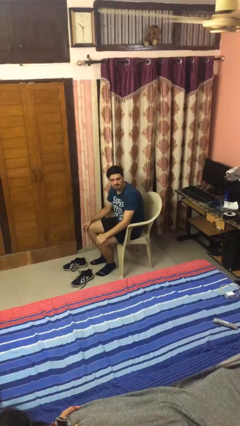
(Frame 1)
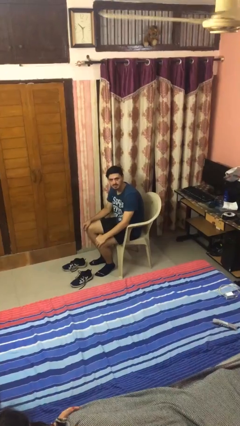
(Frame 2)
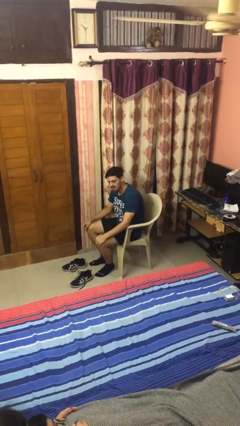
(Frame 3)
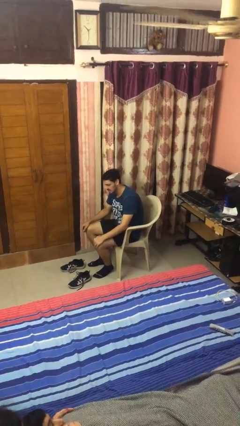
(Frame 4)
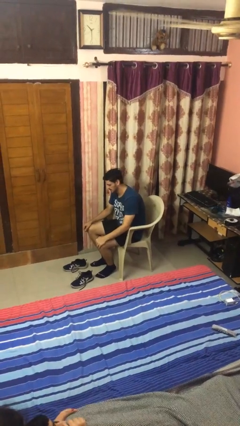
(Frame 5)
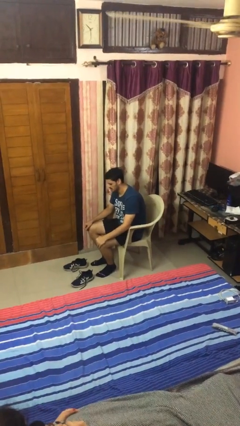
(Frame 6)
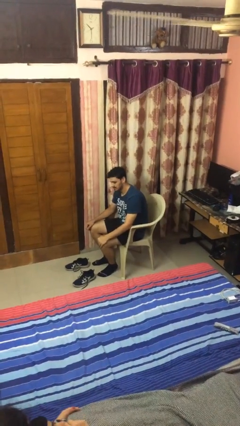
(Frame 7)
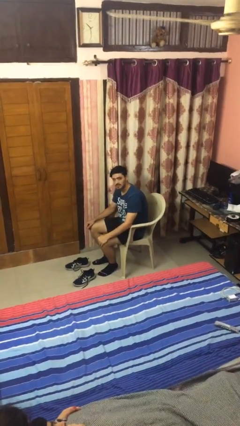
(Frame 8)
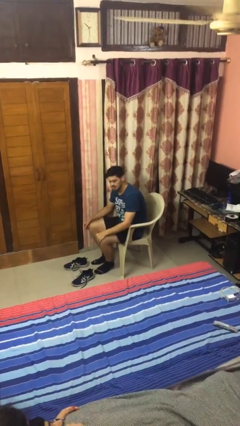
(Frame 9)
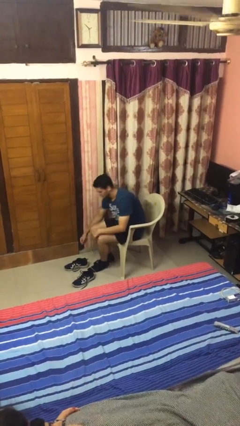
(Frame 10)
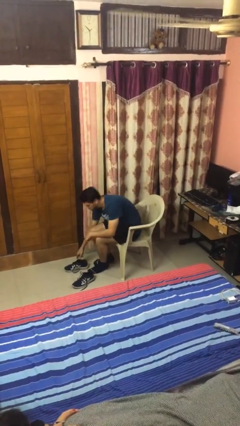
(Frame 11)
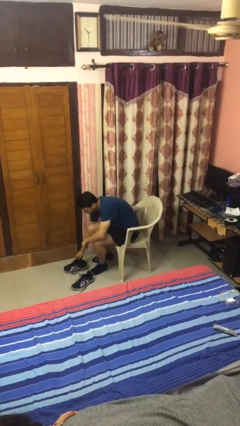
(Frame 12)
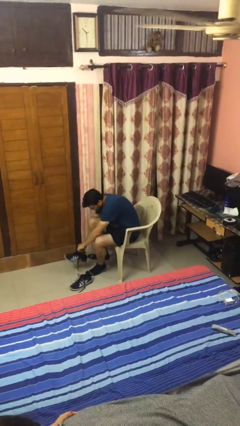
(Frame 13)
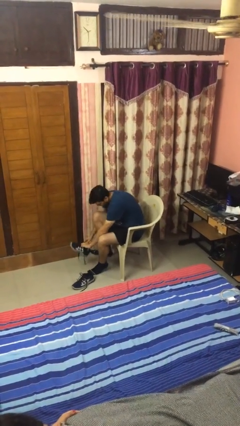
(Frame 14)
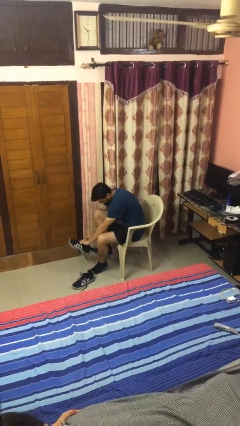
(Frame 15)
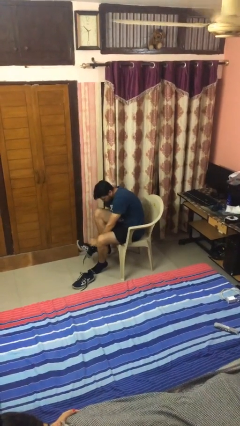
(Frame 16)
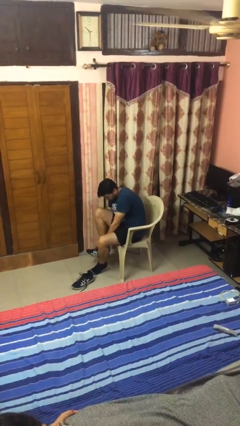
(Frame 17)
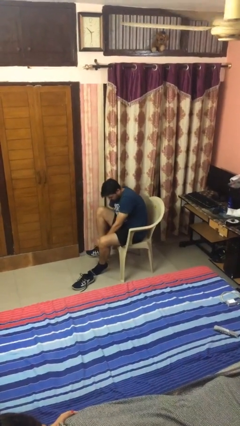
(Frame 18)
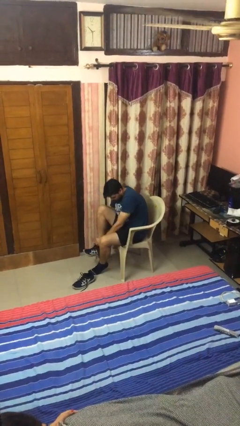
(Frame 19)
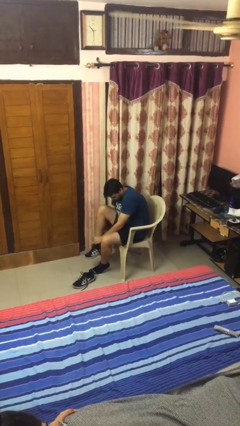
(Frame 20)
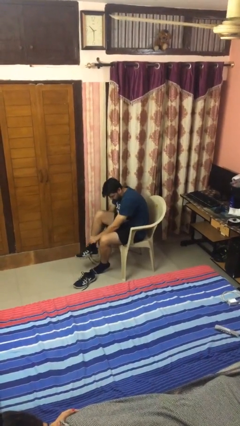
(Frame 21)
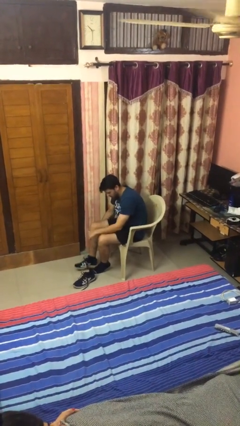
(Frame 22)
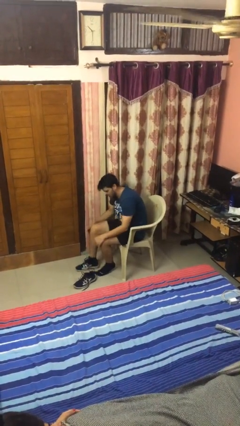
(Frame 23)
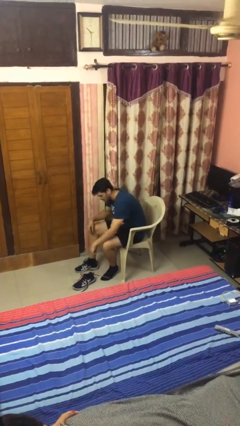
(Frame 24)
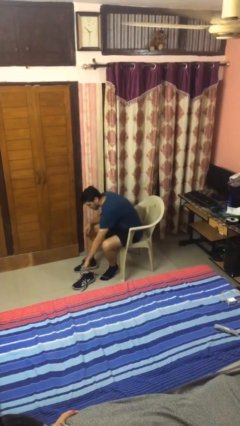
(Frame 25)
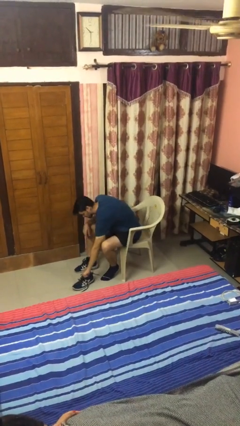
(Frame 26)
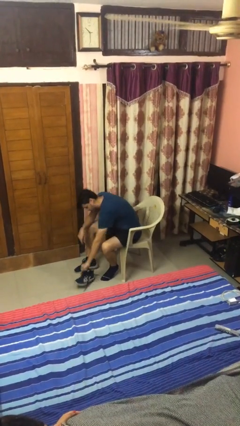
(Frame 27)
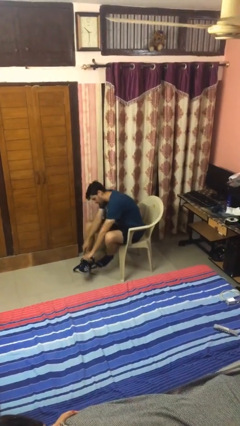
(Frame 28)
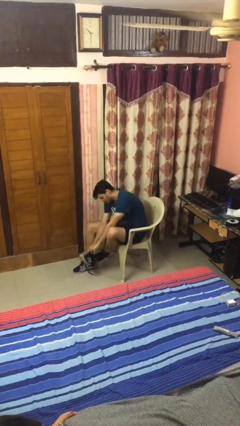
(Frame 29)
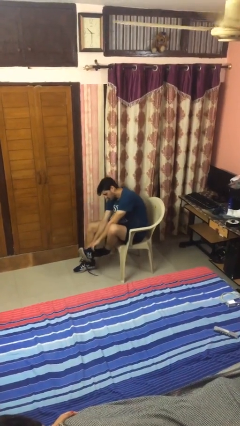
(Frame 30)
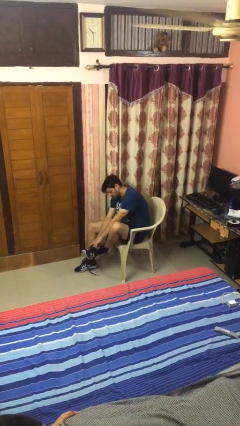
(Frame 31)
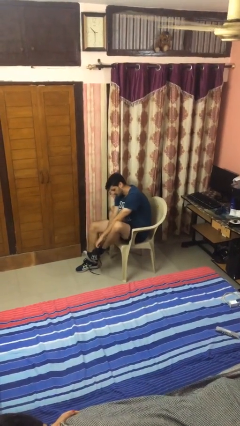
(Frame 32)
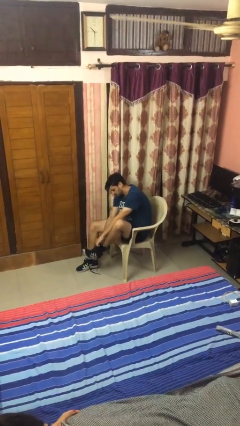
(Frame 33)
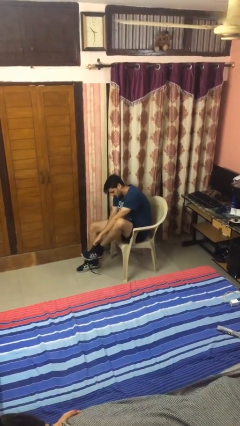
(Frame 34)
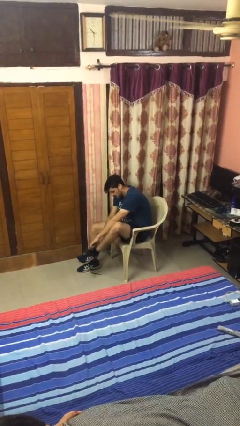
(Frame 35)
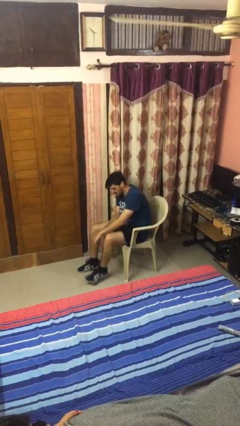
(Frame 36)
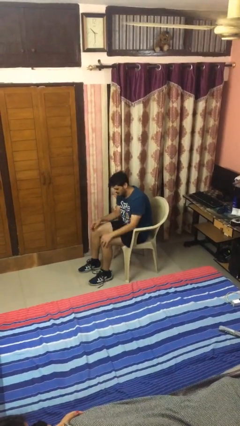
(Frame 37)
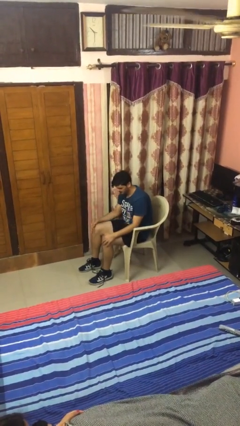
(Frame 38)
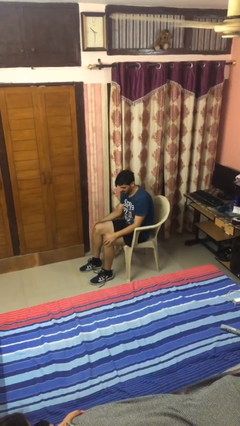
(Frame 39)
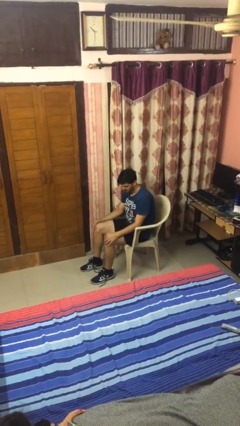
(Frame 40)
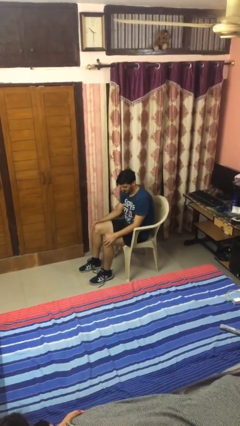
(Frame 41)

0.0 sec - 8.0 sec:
person puts on boots

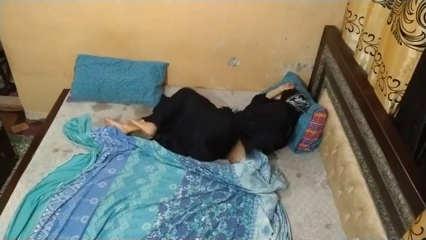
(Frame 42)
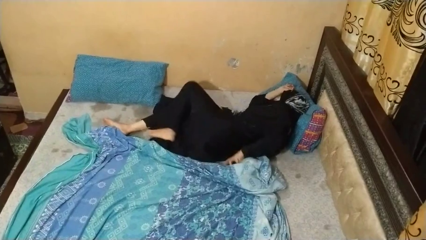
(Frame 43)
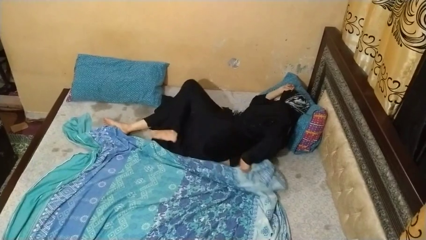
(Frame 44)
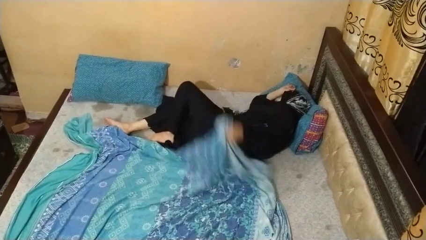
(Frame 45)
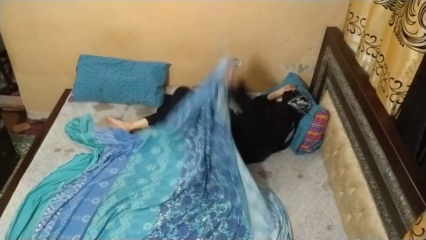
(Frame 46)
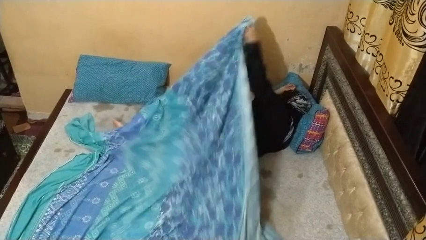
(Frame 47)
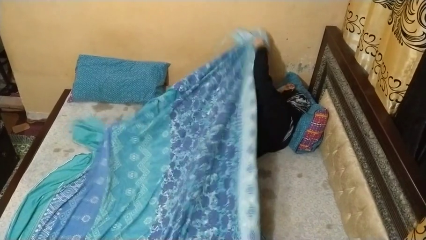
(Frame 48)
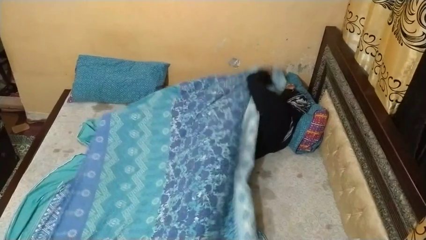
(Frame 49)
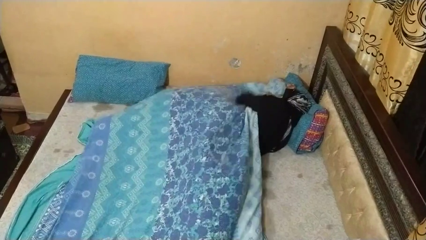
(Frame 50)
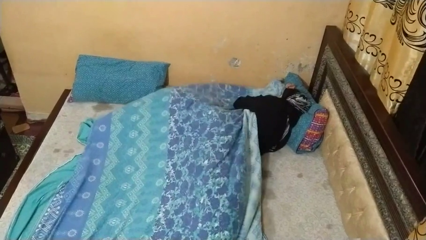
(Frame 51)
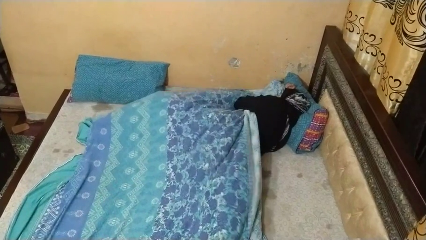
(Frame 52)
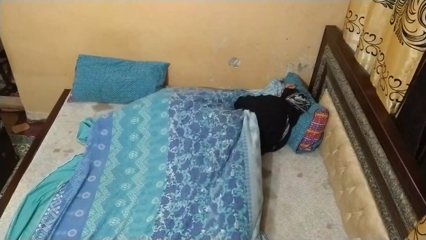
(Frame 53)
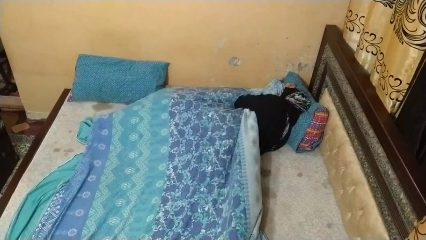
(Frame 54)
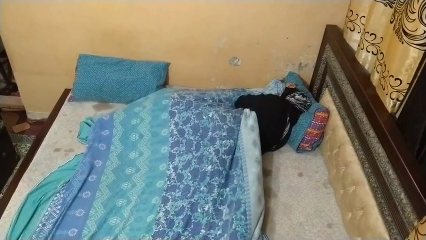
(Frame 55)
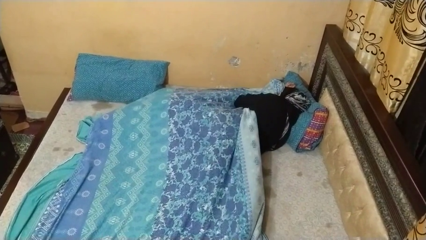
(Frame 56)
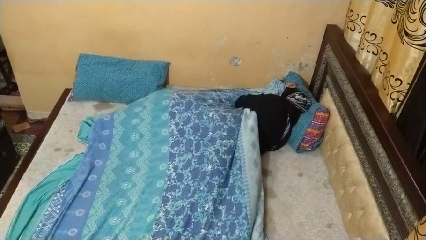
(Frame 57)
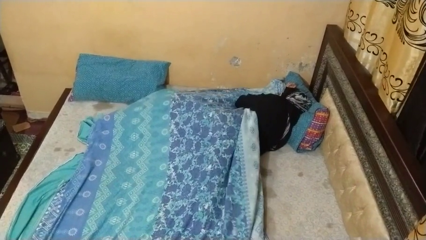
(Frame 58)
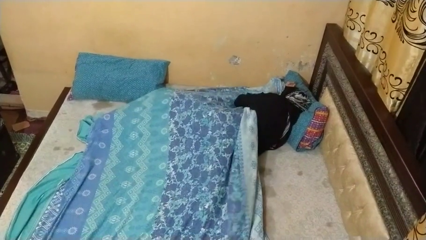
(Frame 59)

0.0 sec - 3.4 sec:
person covers with bedsheets

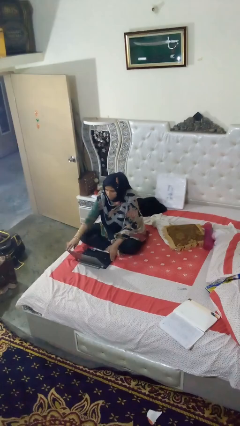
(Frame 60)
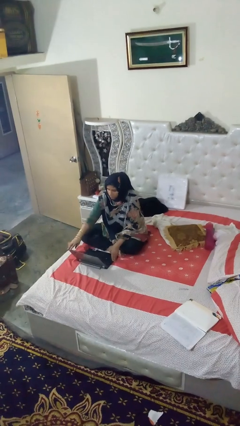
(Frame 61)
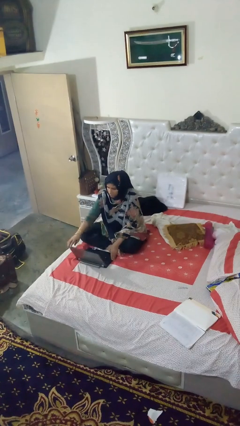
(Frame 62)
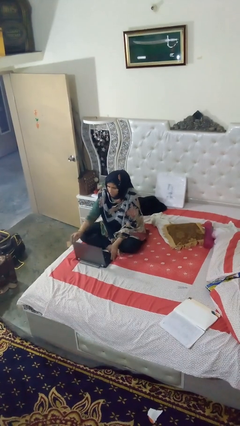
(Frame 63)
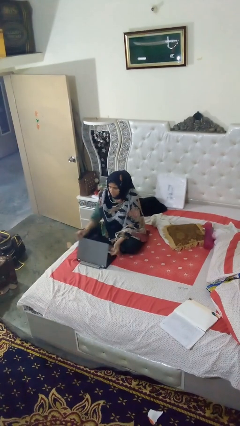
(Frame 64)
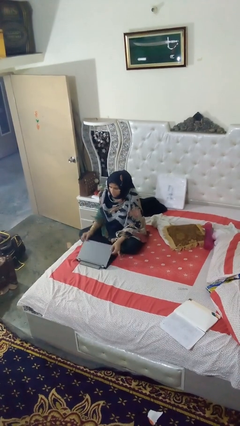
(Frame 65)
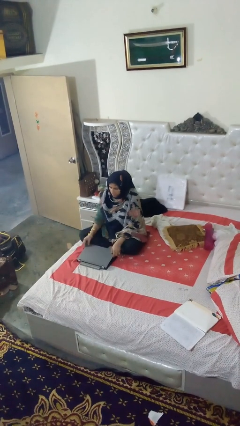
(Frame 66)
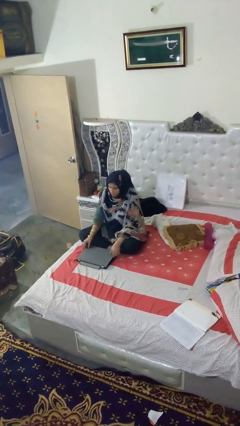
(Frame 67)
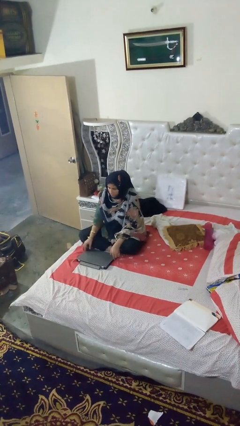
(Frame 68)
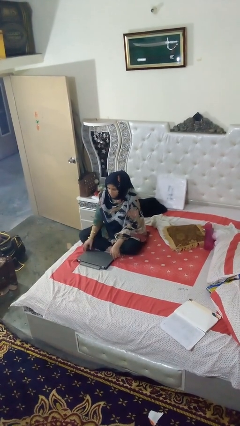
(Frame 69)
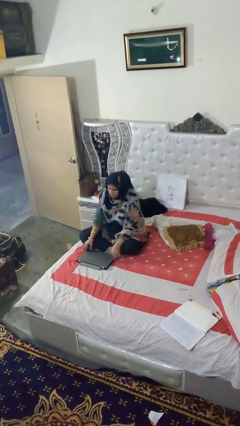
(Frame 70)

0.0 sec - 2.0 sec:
person closes laptop

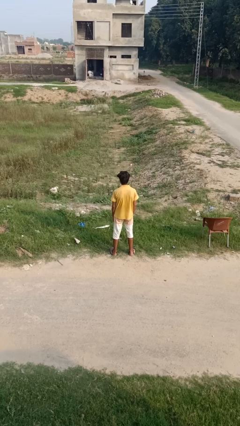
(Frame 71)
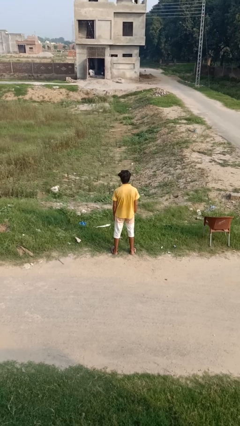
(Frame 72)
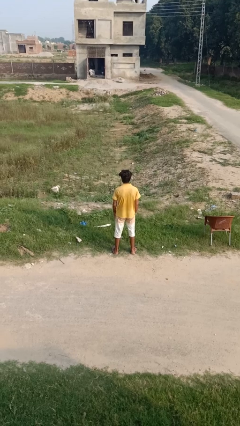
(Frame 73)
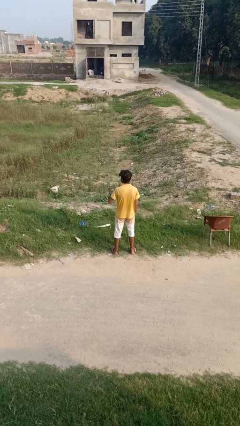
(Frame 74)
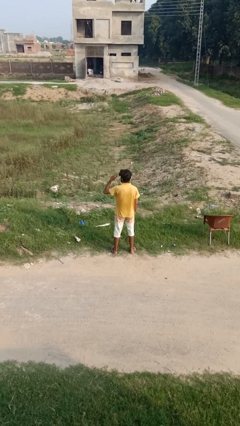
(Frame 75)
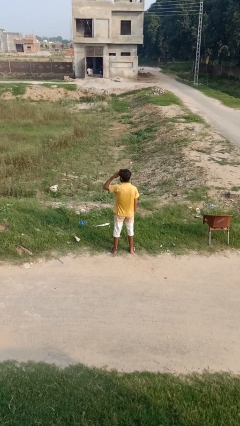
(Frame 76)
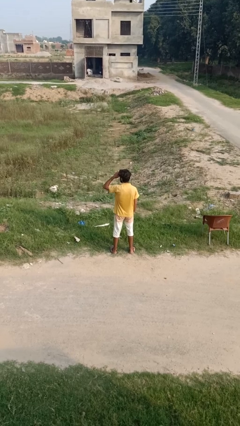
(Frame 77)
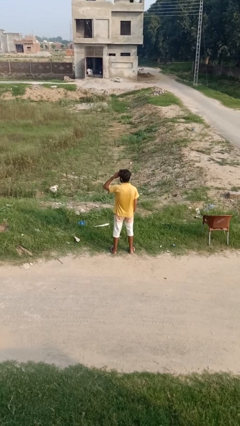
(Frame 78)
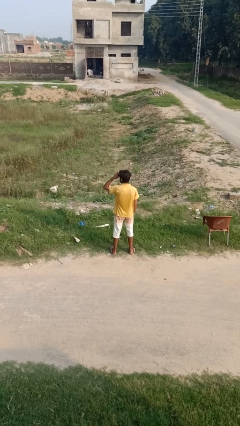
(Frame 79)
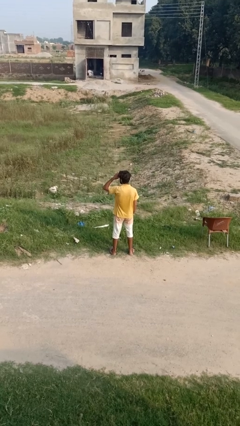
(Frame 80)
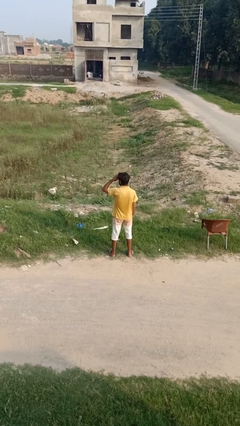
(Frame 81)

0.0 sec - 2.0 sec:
person shades eyes

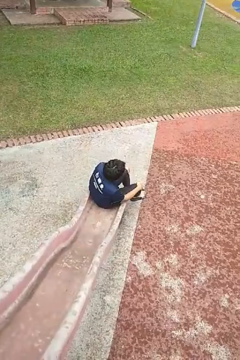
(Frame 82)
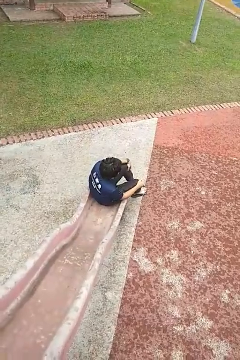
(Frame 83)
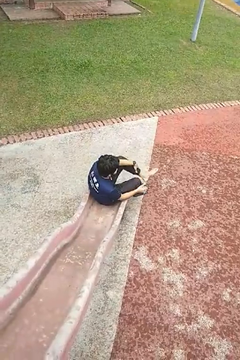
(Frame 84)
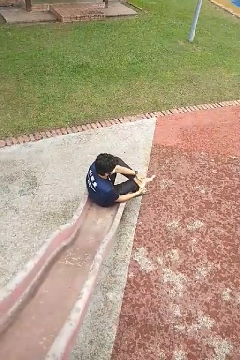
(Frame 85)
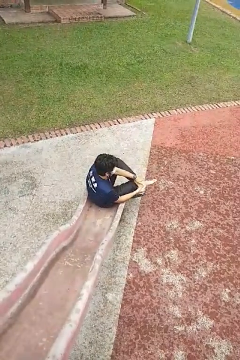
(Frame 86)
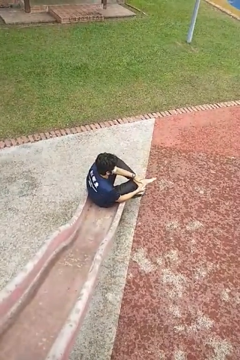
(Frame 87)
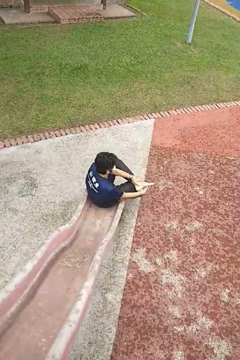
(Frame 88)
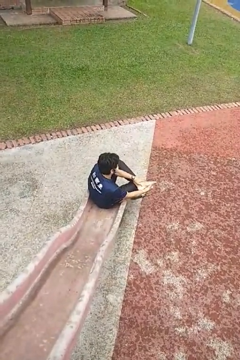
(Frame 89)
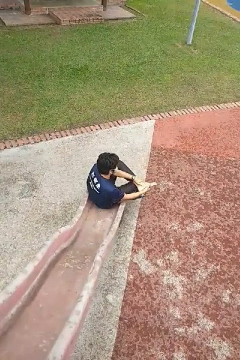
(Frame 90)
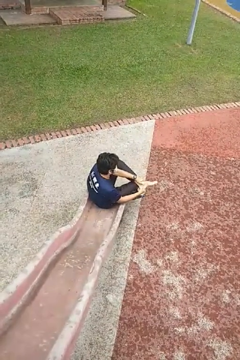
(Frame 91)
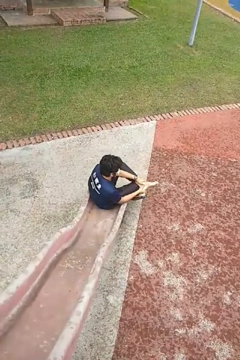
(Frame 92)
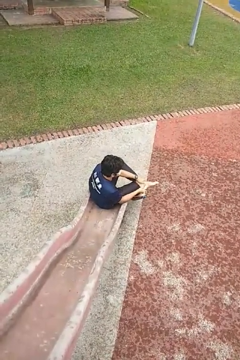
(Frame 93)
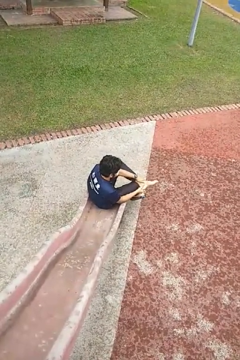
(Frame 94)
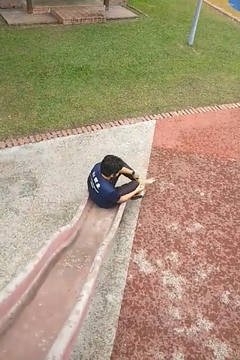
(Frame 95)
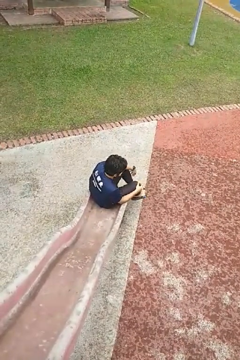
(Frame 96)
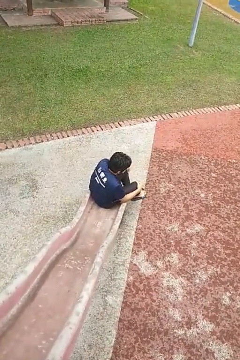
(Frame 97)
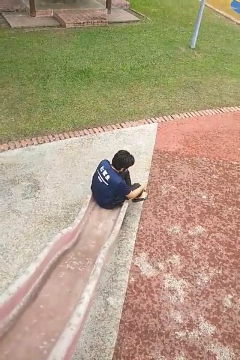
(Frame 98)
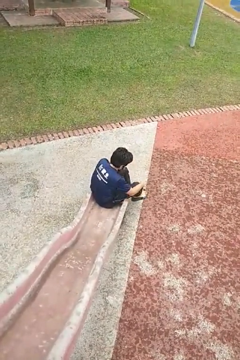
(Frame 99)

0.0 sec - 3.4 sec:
person rubs foot
